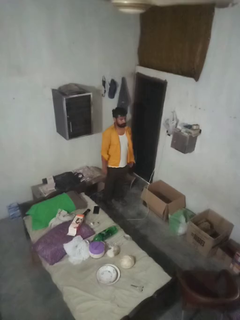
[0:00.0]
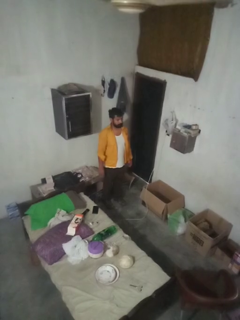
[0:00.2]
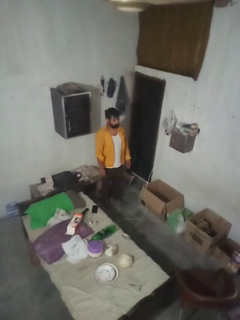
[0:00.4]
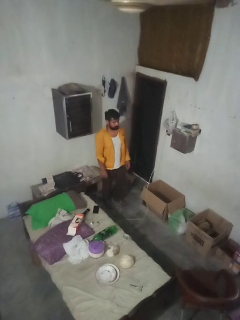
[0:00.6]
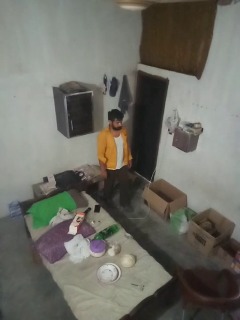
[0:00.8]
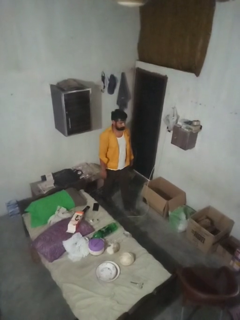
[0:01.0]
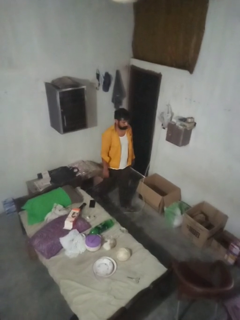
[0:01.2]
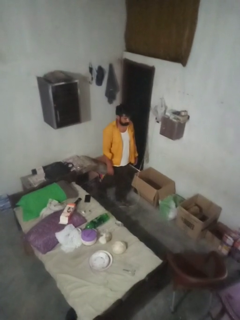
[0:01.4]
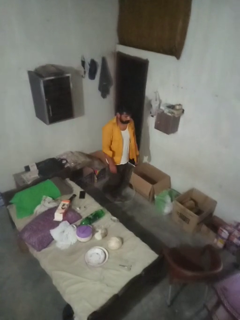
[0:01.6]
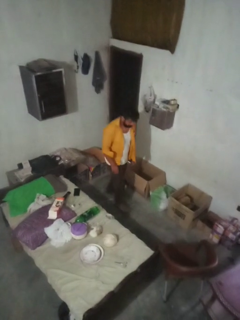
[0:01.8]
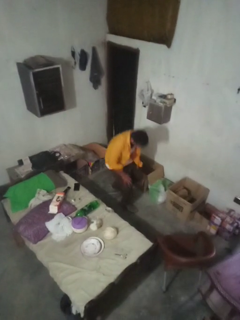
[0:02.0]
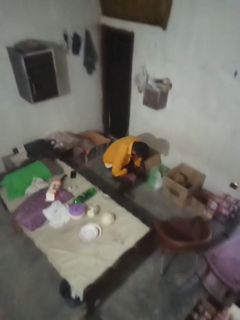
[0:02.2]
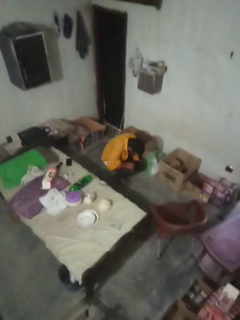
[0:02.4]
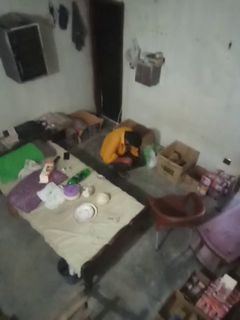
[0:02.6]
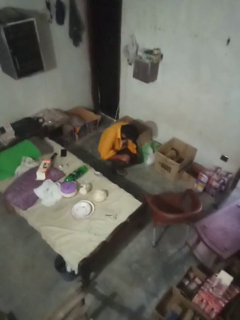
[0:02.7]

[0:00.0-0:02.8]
person trips on object on floor

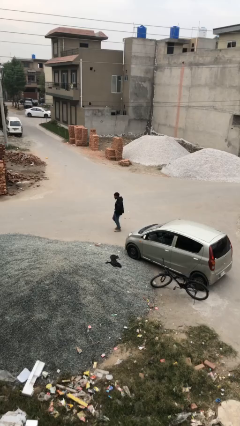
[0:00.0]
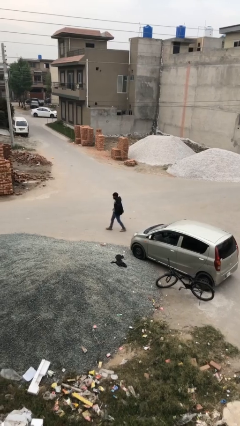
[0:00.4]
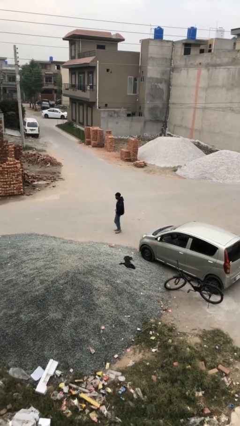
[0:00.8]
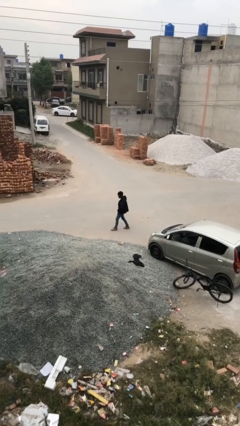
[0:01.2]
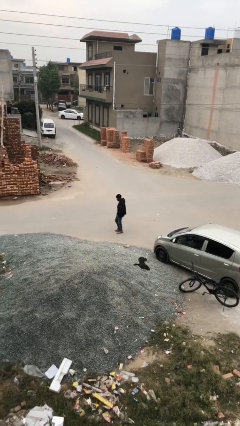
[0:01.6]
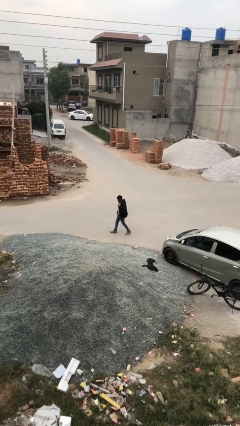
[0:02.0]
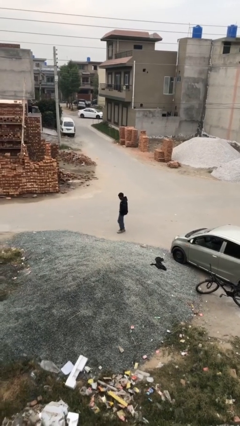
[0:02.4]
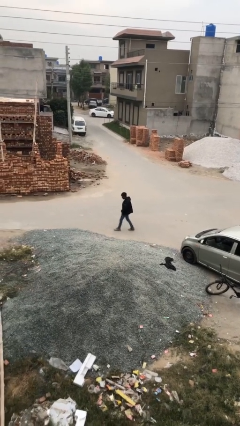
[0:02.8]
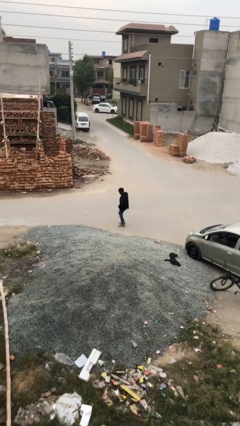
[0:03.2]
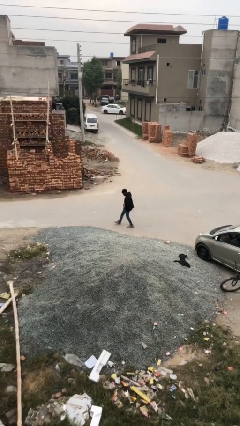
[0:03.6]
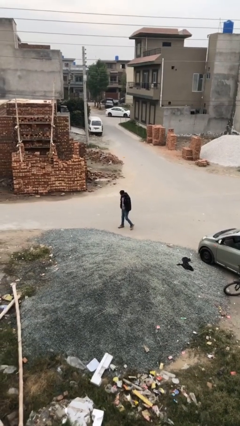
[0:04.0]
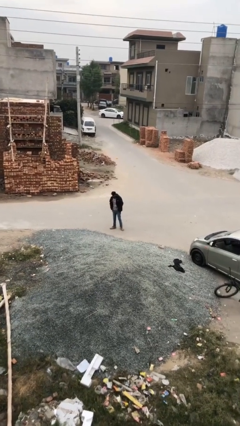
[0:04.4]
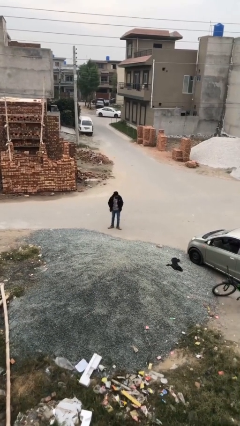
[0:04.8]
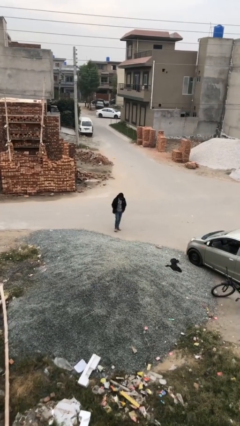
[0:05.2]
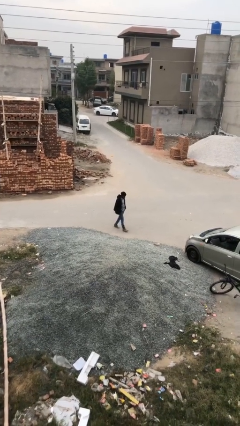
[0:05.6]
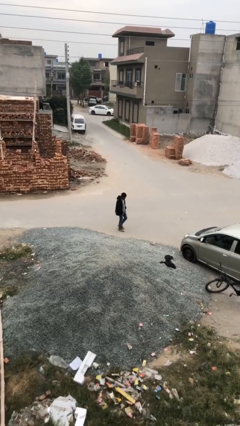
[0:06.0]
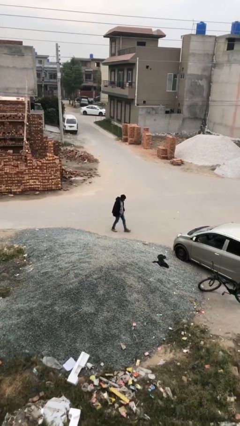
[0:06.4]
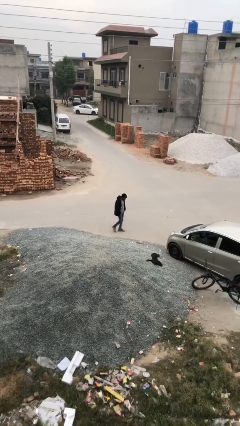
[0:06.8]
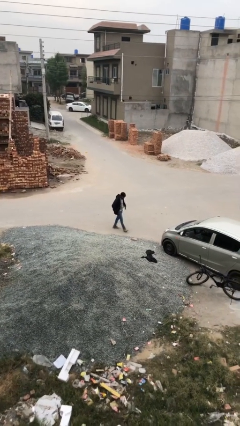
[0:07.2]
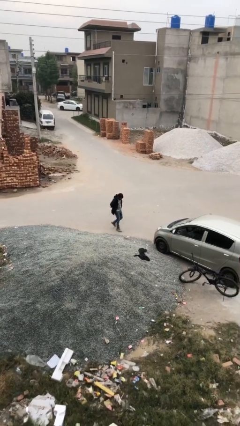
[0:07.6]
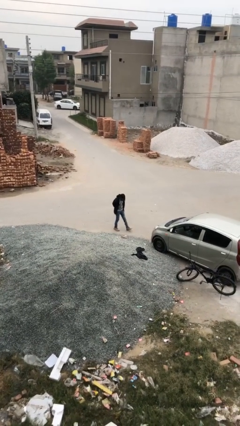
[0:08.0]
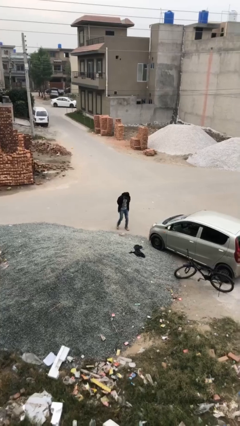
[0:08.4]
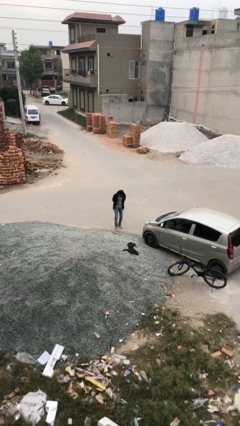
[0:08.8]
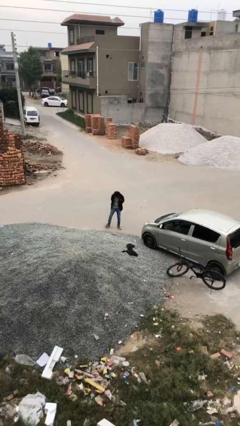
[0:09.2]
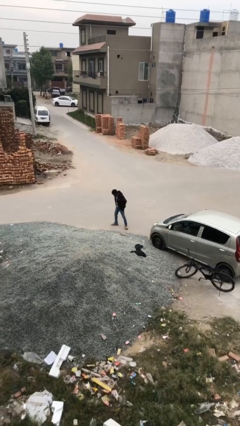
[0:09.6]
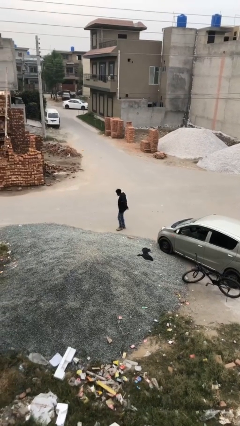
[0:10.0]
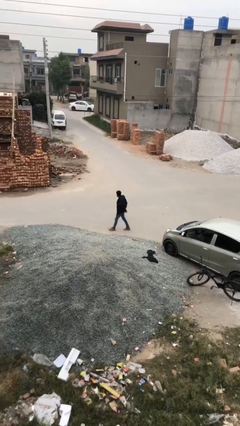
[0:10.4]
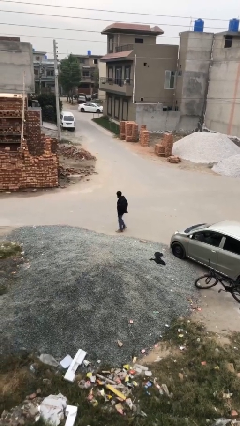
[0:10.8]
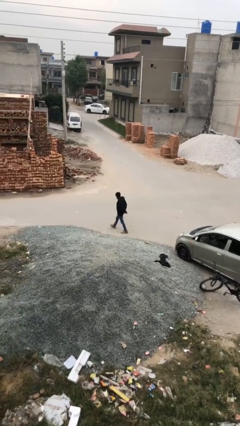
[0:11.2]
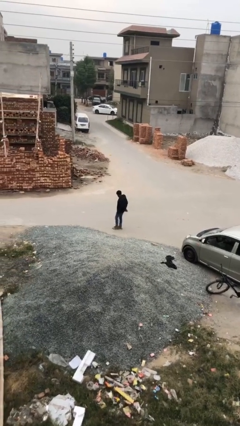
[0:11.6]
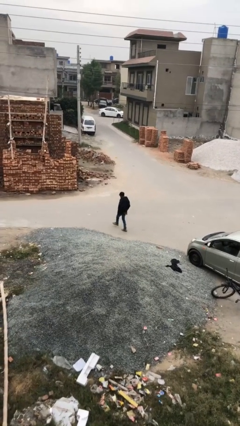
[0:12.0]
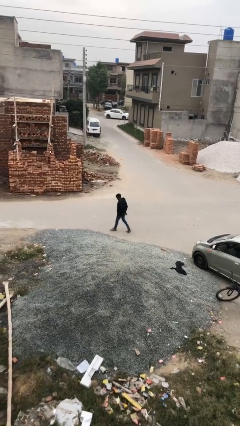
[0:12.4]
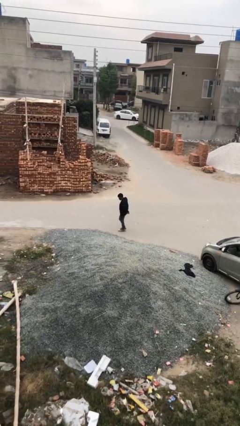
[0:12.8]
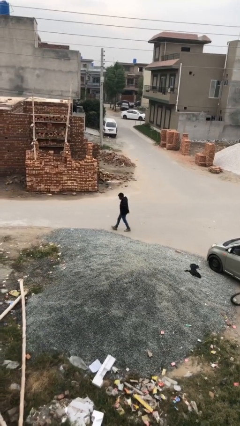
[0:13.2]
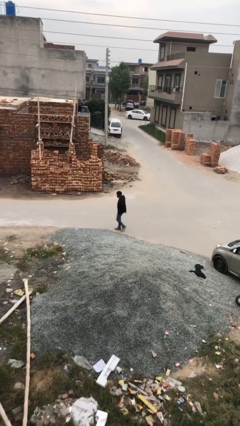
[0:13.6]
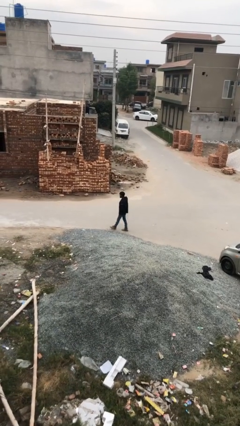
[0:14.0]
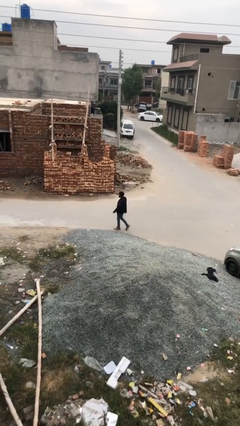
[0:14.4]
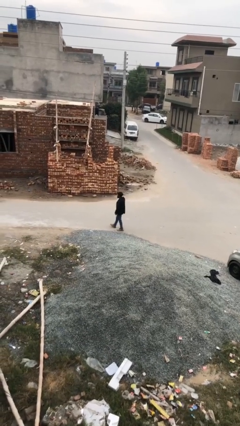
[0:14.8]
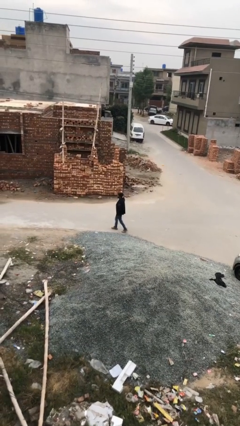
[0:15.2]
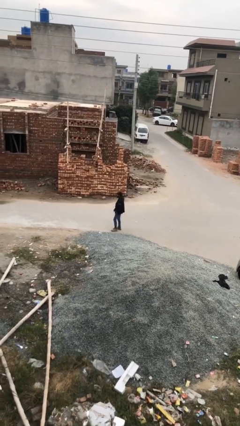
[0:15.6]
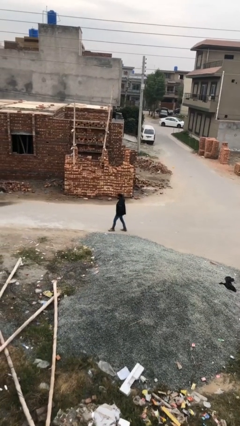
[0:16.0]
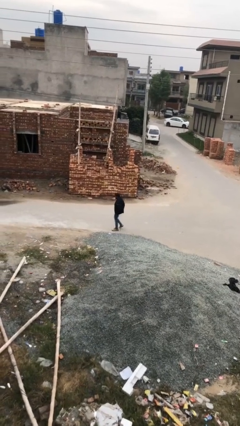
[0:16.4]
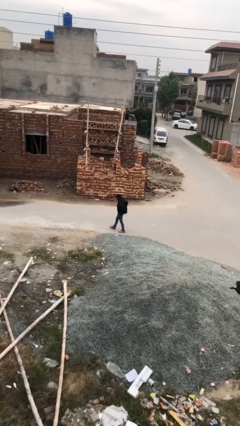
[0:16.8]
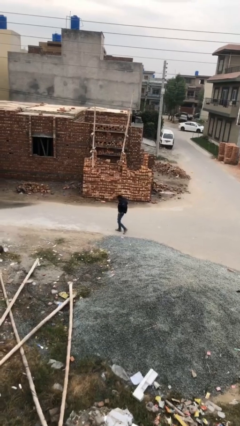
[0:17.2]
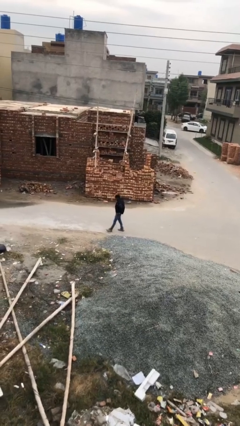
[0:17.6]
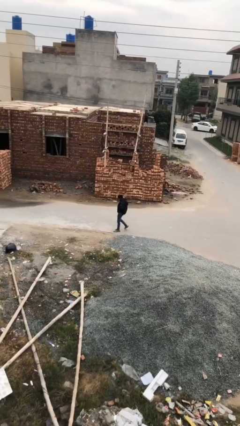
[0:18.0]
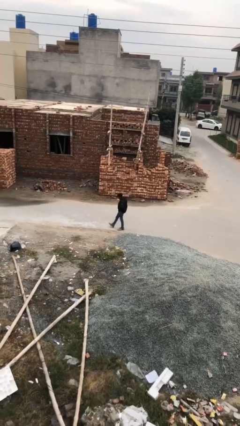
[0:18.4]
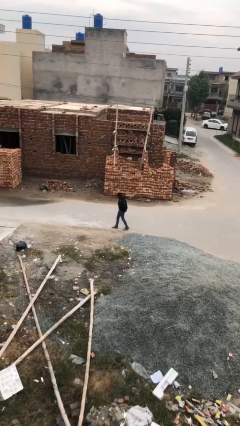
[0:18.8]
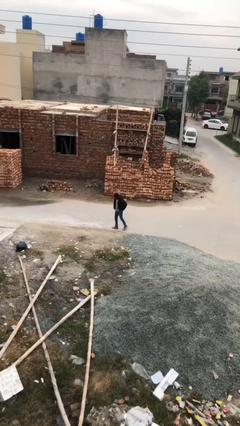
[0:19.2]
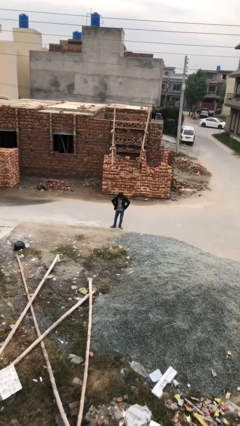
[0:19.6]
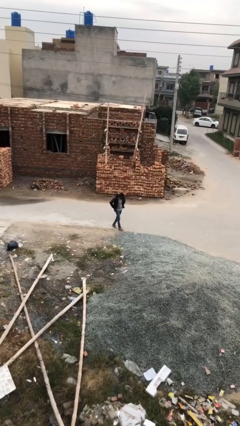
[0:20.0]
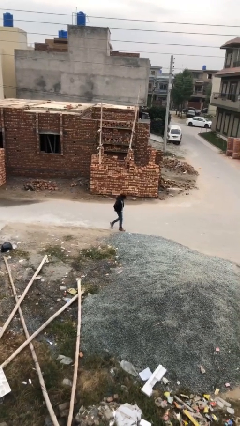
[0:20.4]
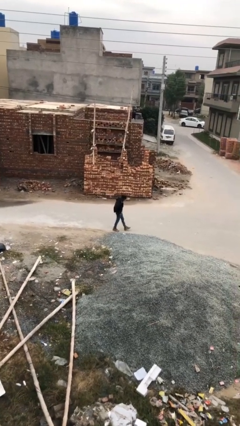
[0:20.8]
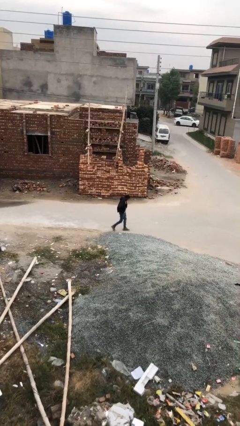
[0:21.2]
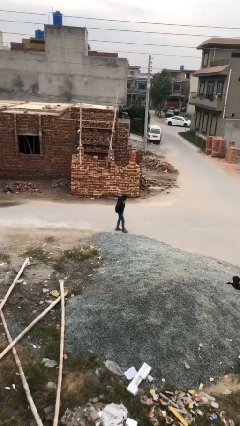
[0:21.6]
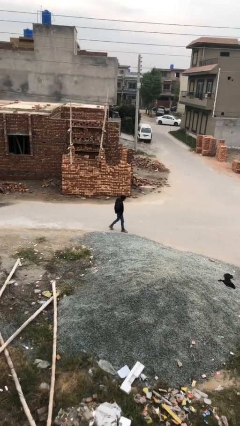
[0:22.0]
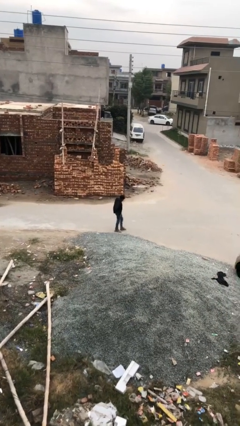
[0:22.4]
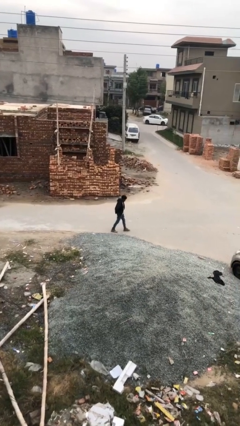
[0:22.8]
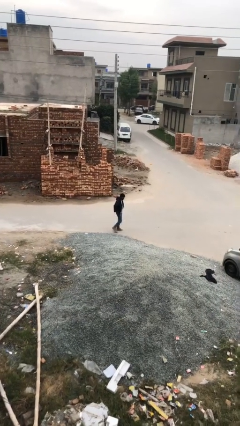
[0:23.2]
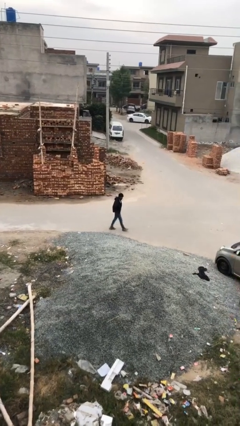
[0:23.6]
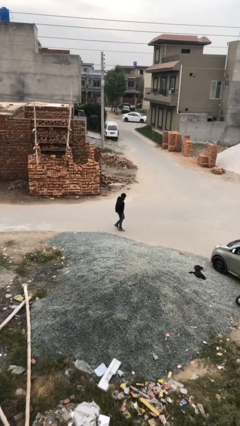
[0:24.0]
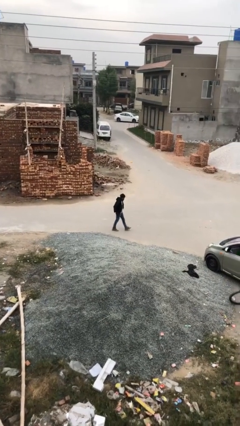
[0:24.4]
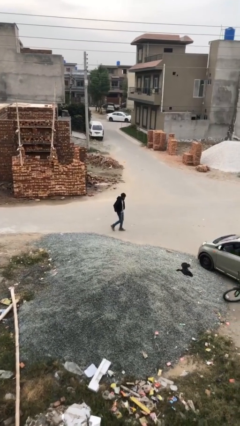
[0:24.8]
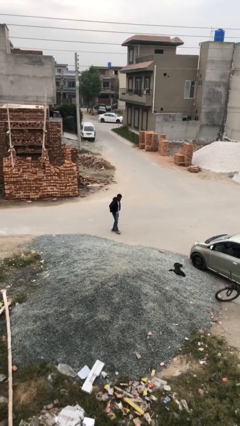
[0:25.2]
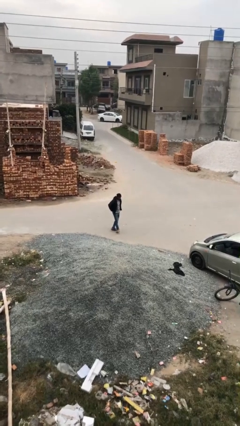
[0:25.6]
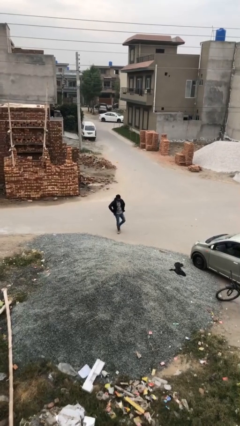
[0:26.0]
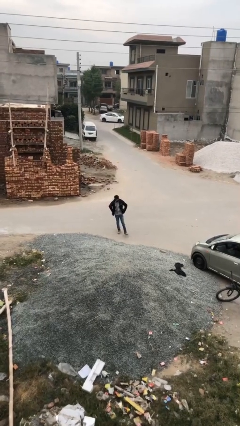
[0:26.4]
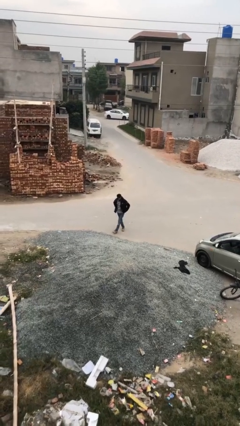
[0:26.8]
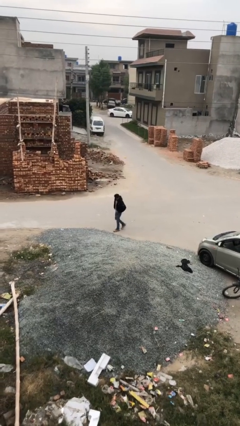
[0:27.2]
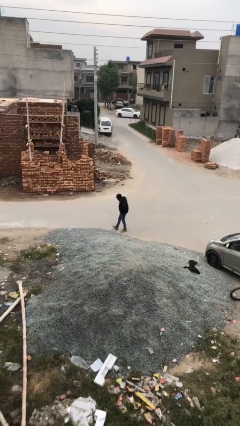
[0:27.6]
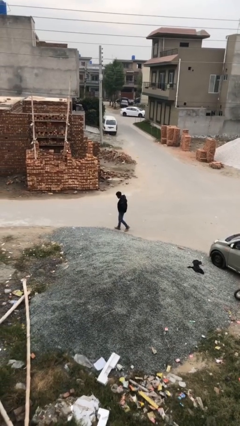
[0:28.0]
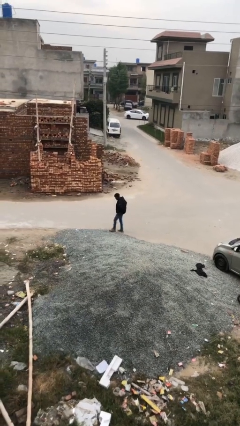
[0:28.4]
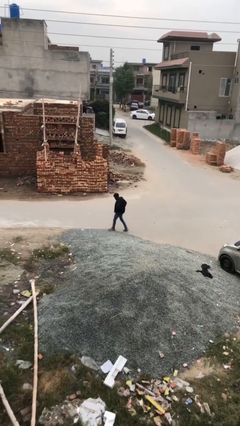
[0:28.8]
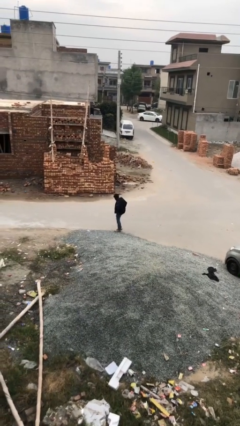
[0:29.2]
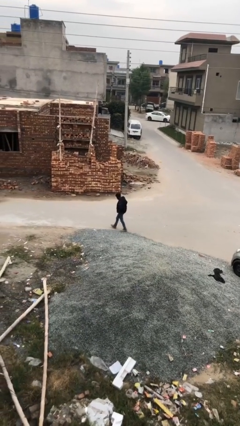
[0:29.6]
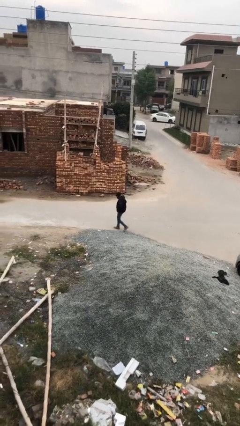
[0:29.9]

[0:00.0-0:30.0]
person walks

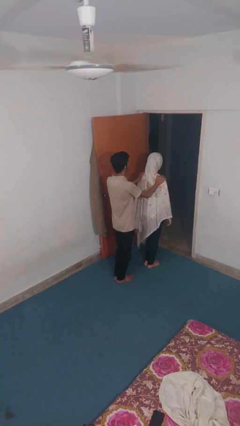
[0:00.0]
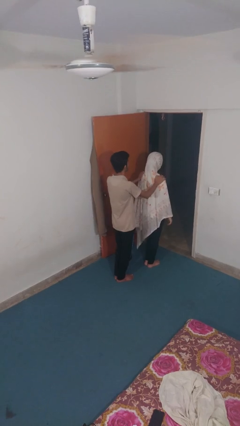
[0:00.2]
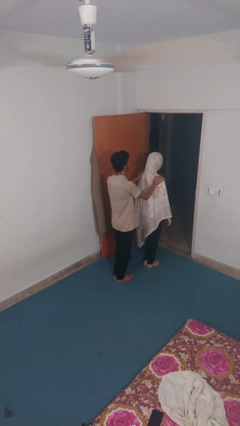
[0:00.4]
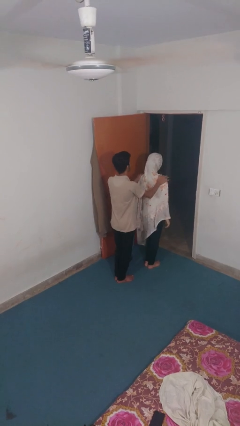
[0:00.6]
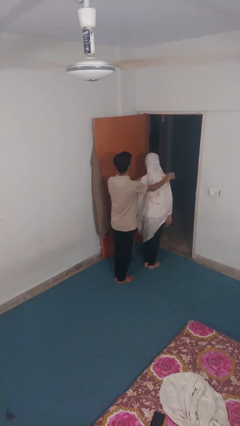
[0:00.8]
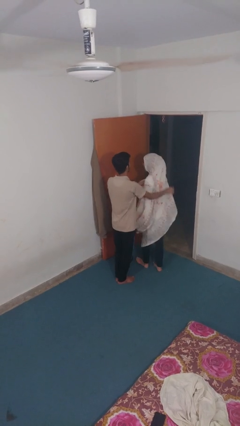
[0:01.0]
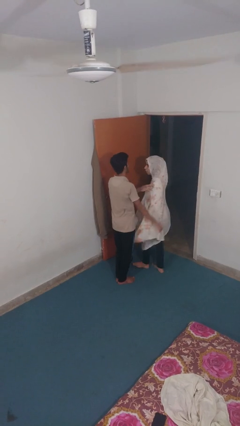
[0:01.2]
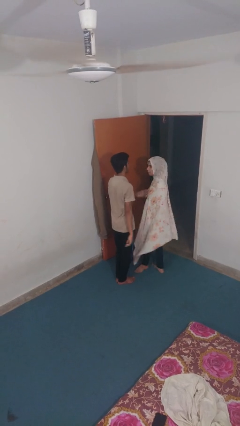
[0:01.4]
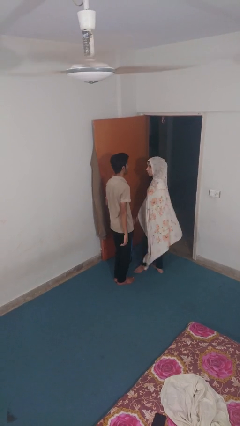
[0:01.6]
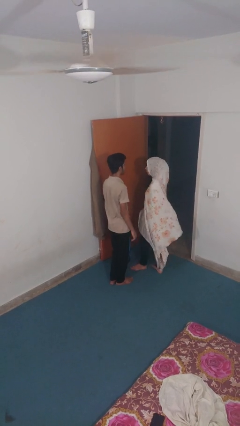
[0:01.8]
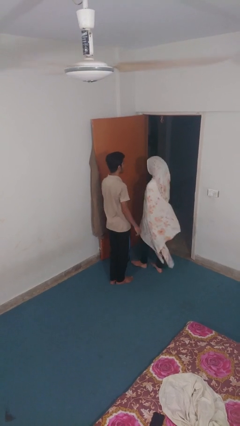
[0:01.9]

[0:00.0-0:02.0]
person spins person around
